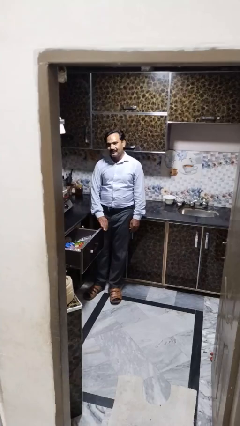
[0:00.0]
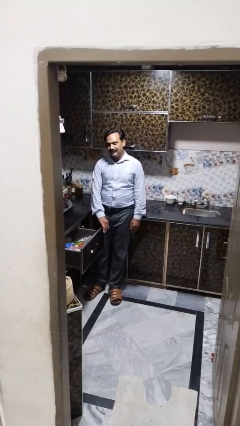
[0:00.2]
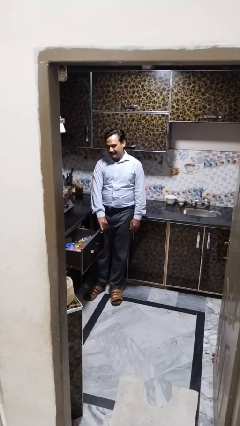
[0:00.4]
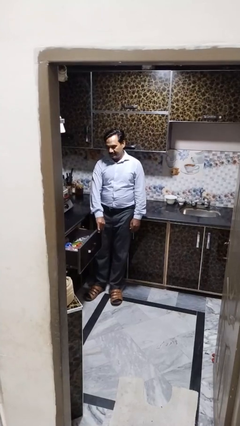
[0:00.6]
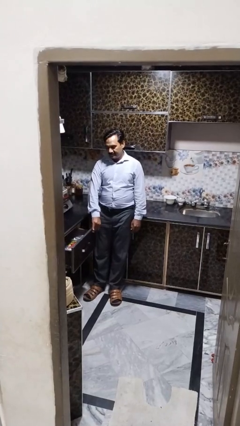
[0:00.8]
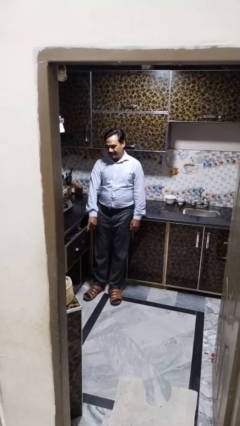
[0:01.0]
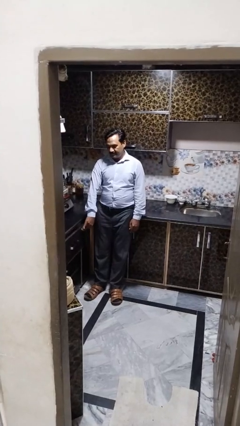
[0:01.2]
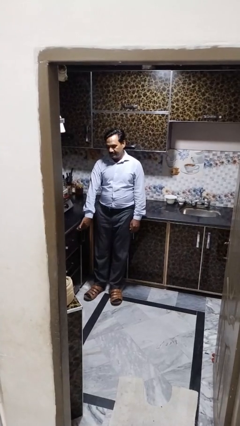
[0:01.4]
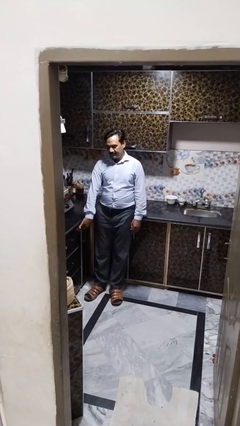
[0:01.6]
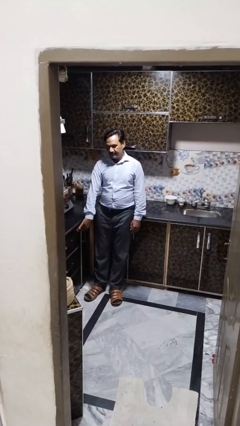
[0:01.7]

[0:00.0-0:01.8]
person closes kitchen drawer

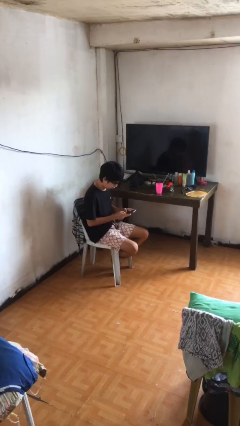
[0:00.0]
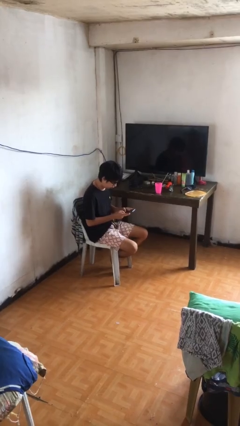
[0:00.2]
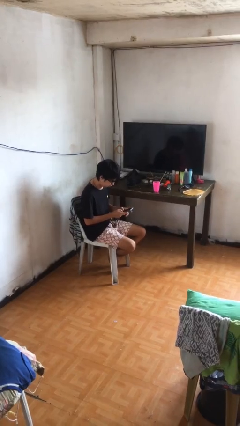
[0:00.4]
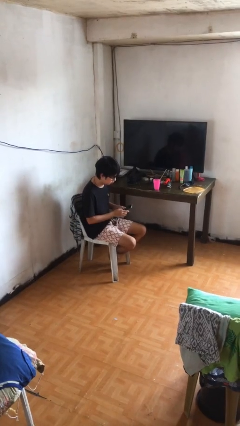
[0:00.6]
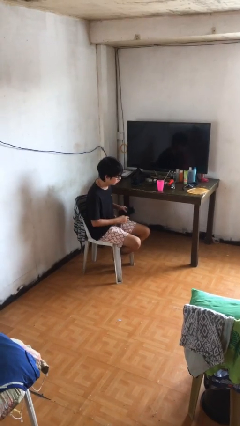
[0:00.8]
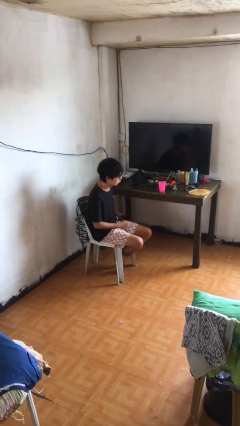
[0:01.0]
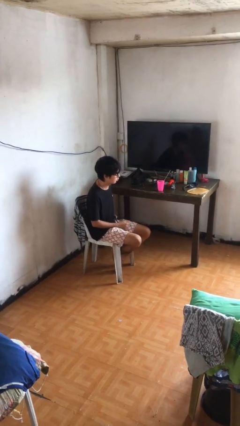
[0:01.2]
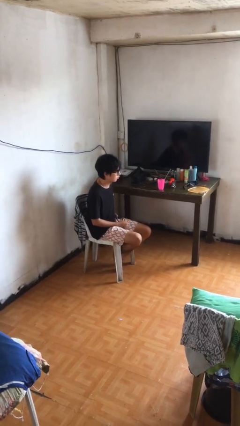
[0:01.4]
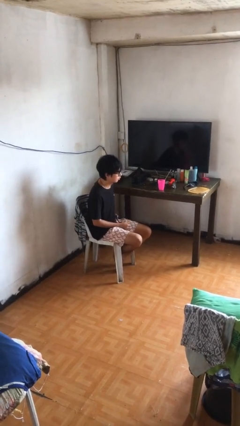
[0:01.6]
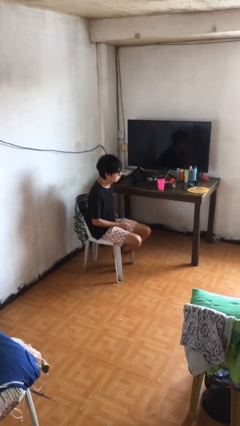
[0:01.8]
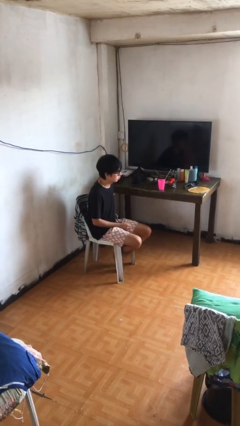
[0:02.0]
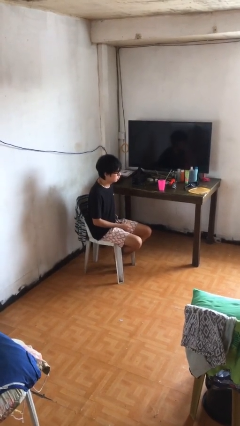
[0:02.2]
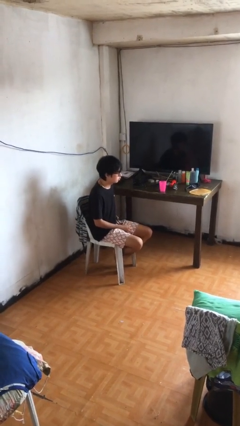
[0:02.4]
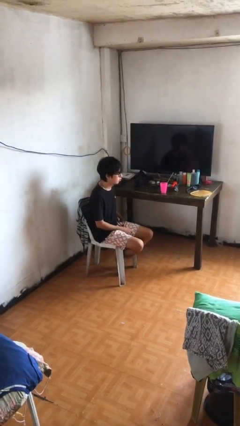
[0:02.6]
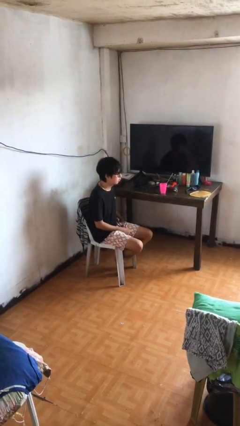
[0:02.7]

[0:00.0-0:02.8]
person puts phone into pocket

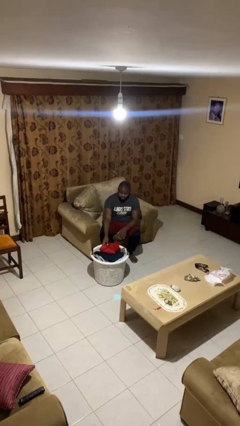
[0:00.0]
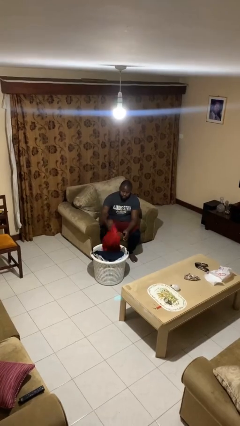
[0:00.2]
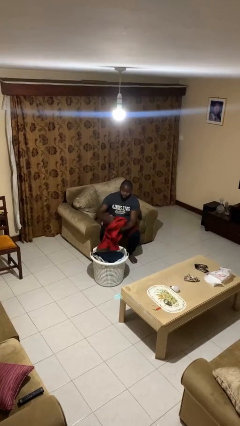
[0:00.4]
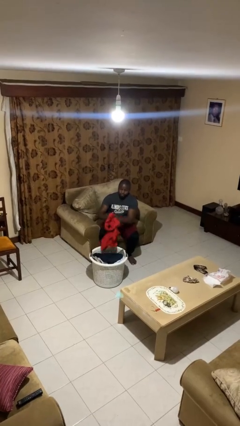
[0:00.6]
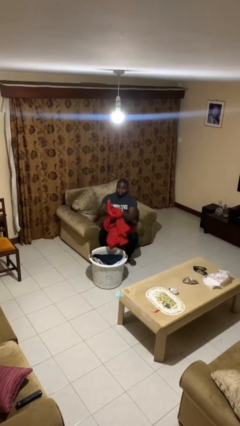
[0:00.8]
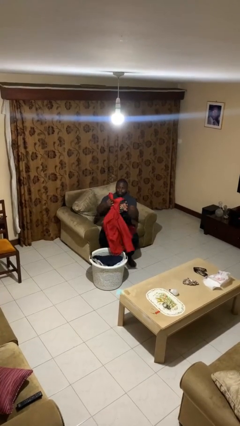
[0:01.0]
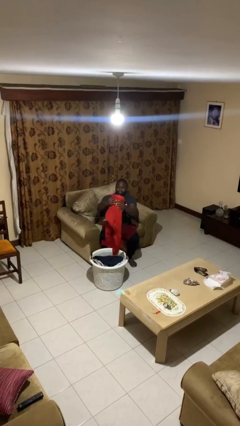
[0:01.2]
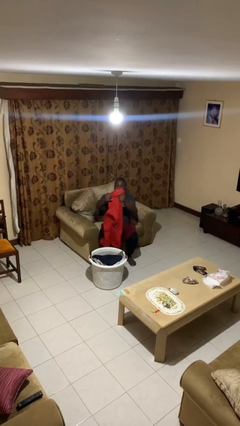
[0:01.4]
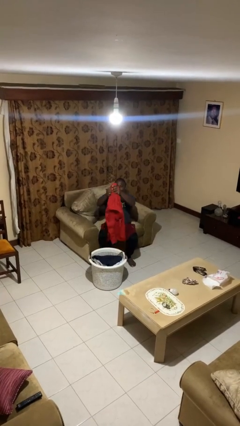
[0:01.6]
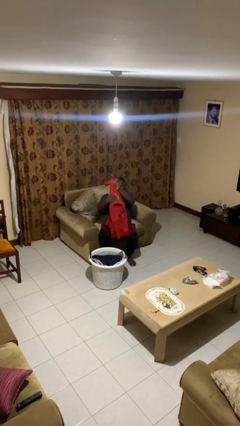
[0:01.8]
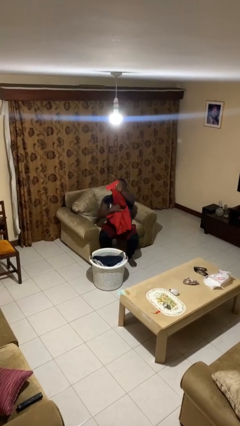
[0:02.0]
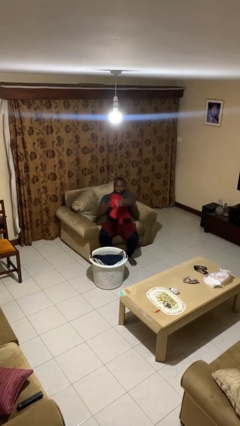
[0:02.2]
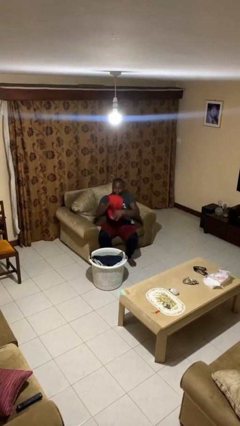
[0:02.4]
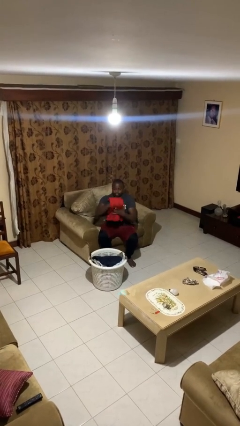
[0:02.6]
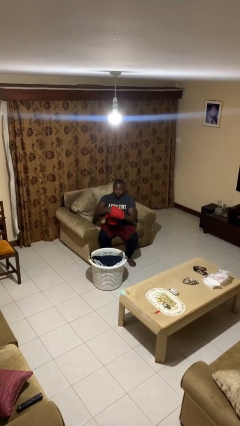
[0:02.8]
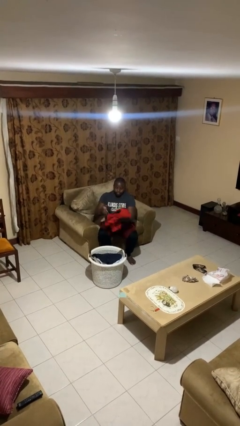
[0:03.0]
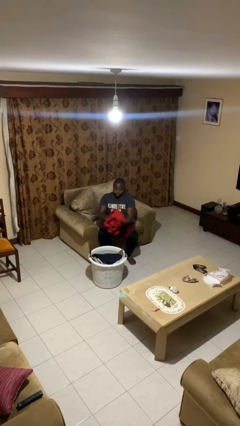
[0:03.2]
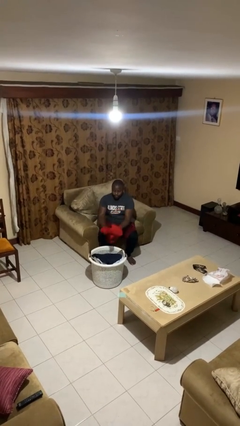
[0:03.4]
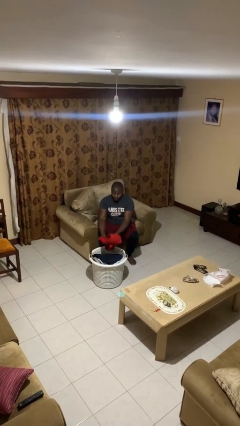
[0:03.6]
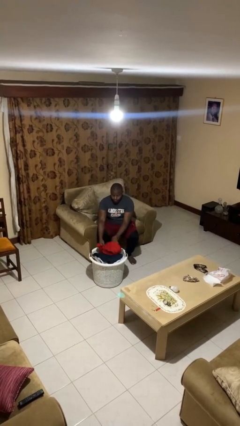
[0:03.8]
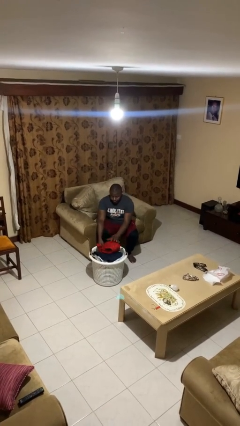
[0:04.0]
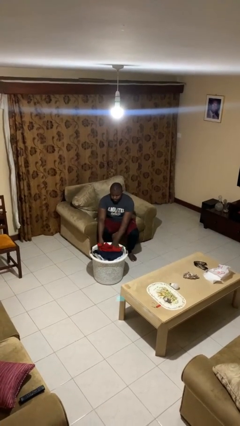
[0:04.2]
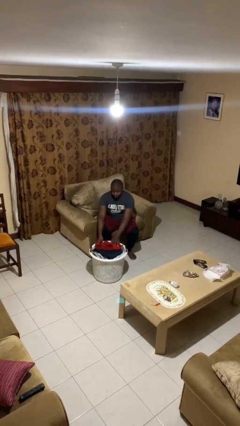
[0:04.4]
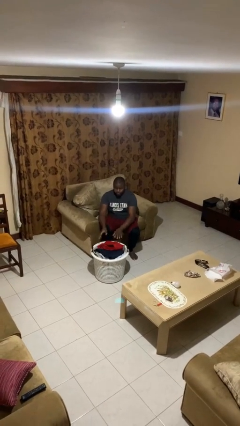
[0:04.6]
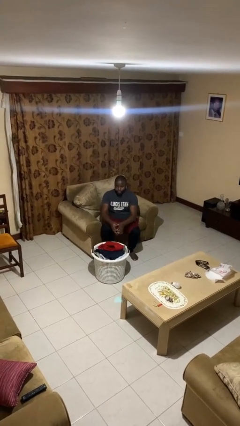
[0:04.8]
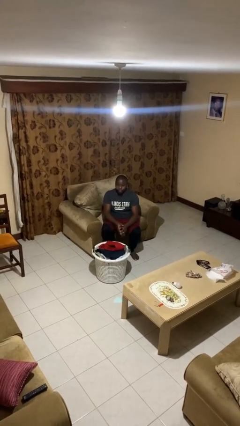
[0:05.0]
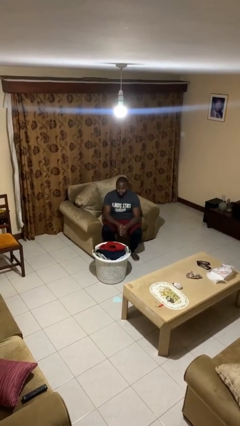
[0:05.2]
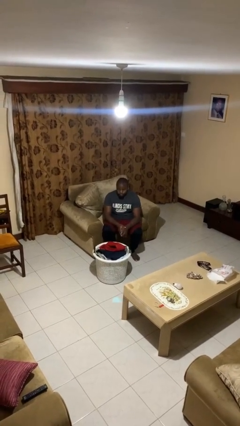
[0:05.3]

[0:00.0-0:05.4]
person folds shirt

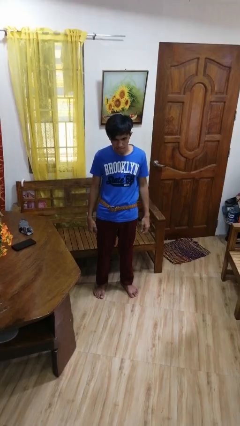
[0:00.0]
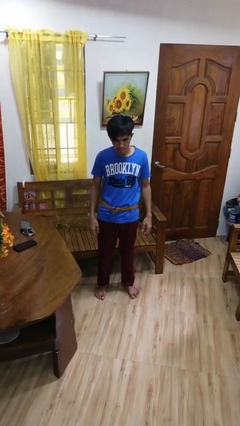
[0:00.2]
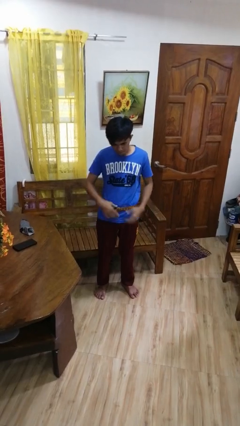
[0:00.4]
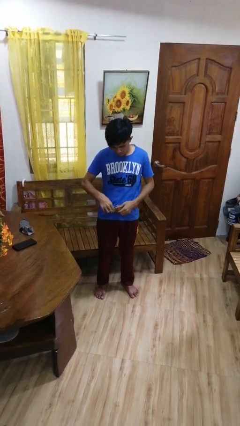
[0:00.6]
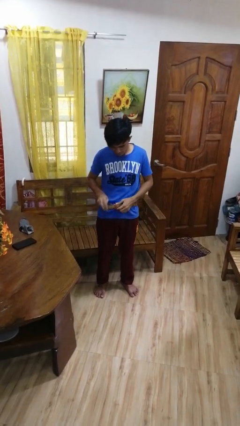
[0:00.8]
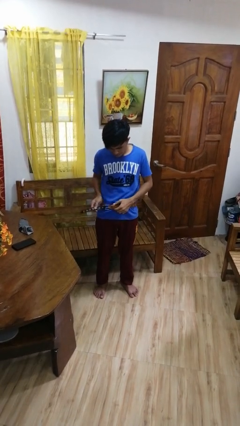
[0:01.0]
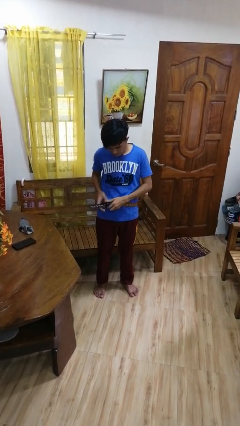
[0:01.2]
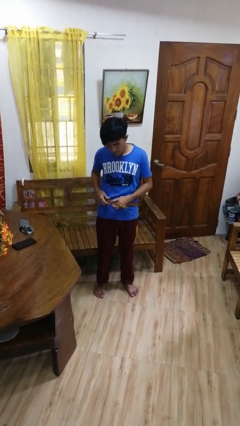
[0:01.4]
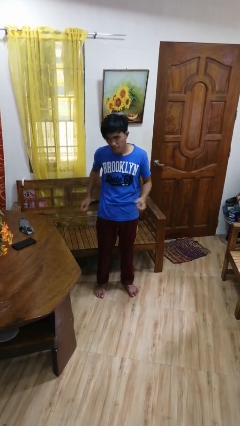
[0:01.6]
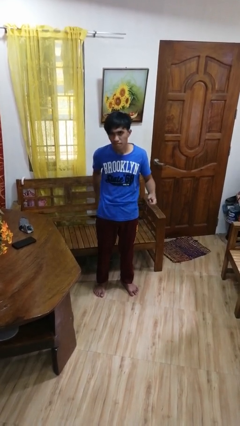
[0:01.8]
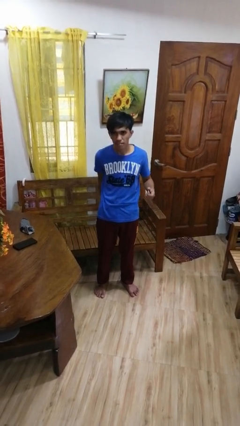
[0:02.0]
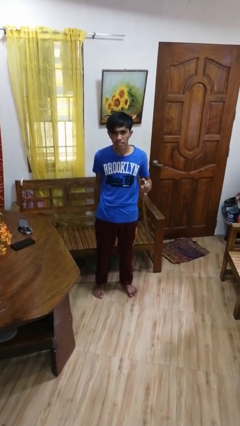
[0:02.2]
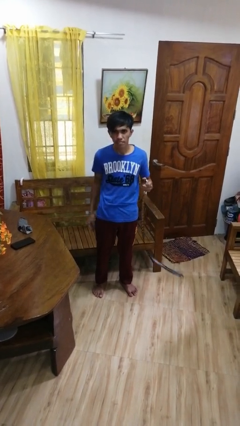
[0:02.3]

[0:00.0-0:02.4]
person takes off belt

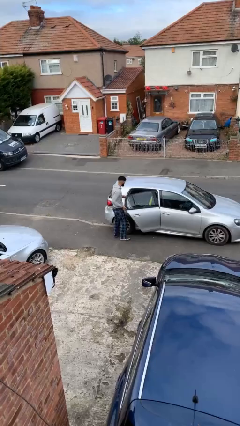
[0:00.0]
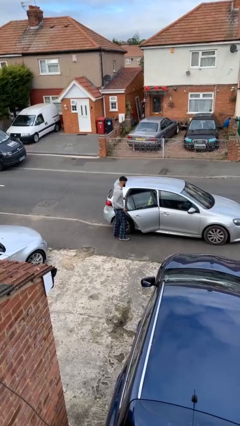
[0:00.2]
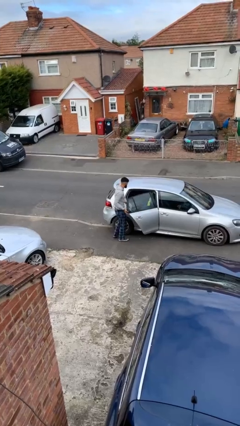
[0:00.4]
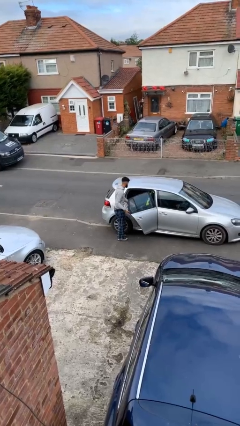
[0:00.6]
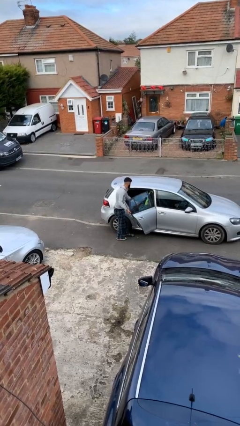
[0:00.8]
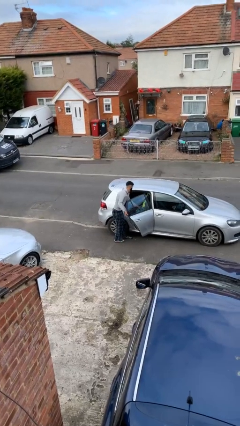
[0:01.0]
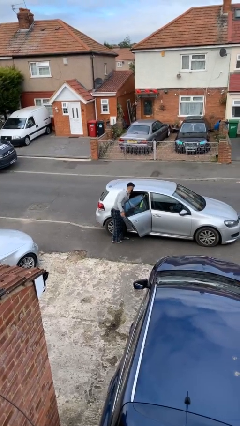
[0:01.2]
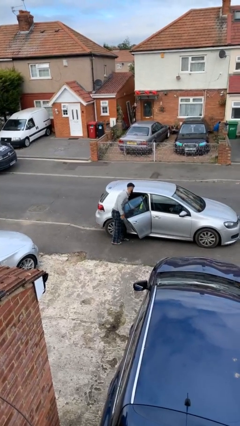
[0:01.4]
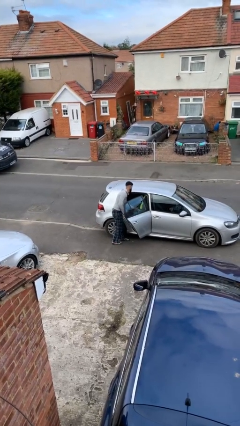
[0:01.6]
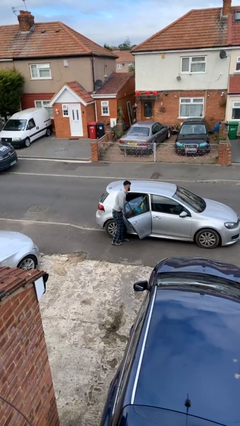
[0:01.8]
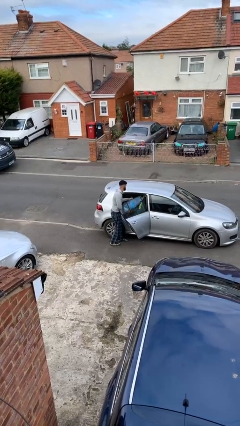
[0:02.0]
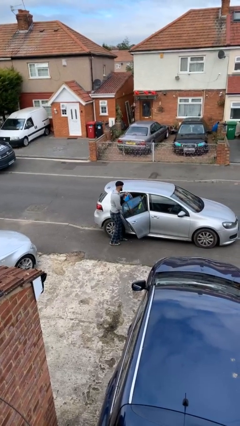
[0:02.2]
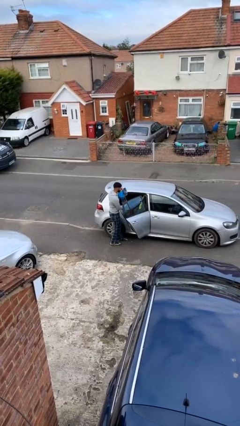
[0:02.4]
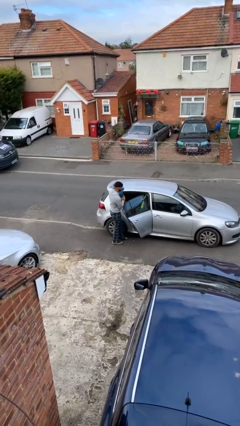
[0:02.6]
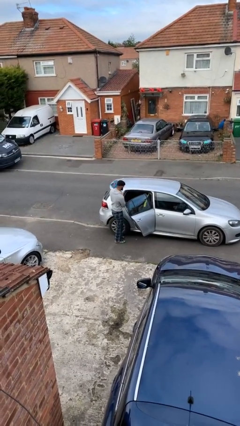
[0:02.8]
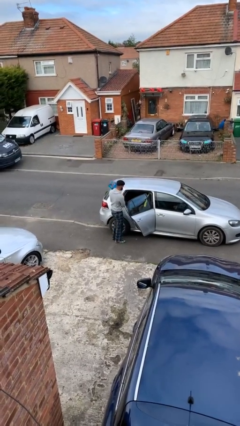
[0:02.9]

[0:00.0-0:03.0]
person unloads car

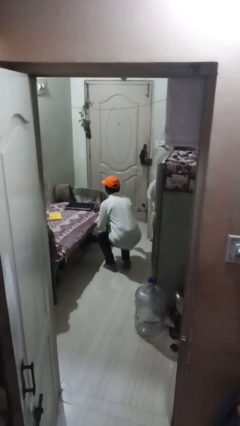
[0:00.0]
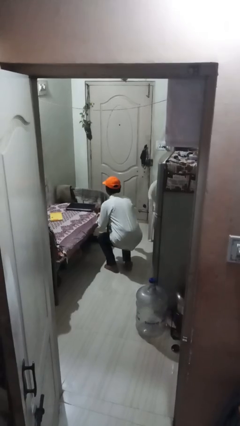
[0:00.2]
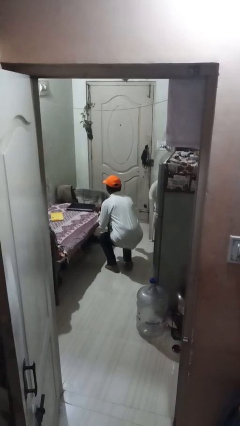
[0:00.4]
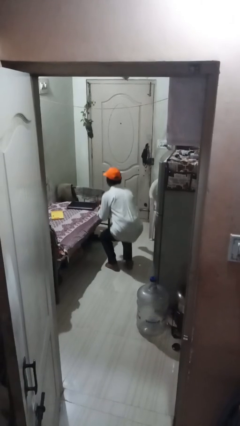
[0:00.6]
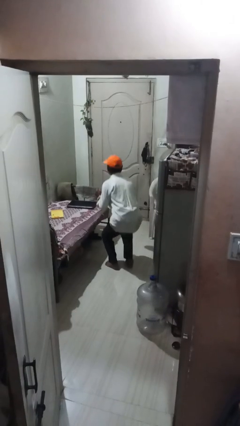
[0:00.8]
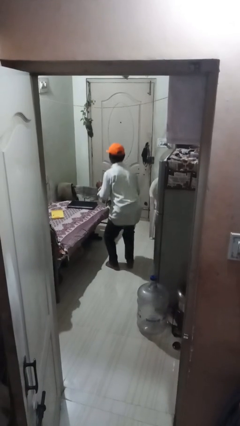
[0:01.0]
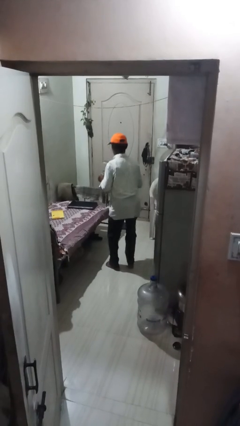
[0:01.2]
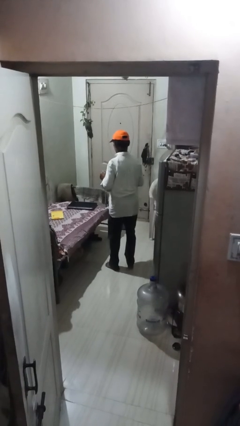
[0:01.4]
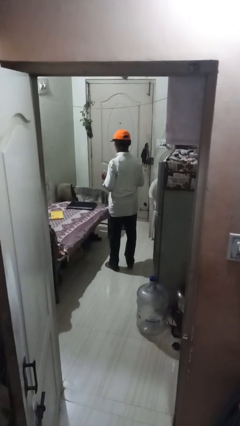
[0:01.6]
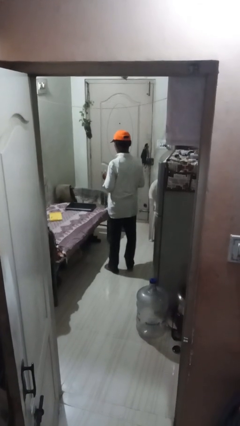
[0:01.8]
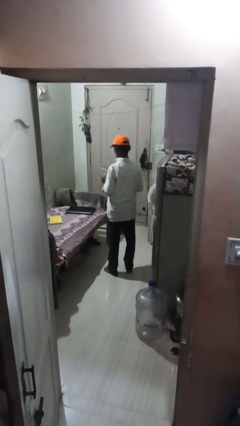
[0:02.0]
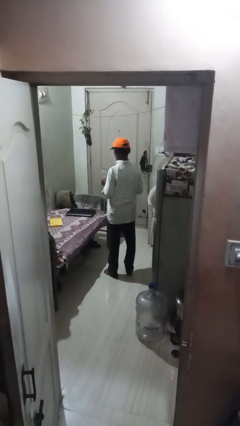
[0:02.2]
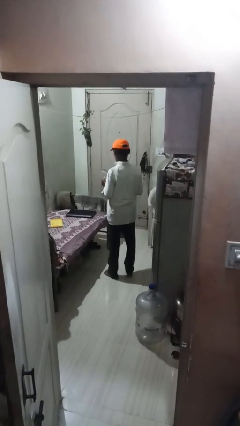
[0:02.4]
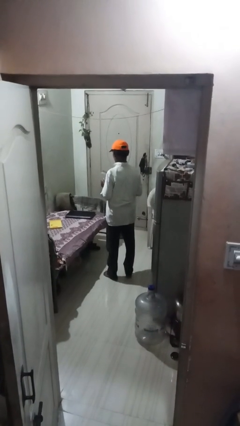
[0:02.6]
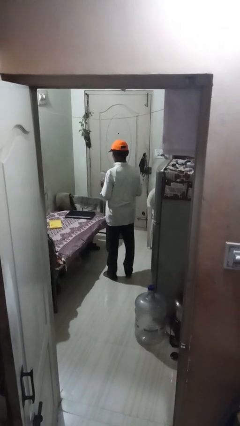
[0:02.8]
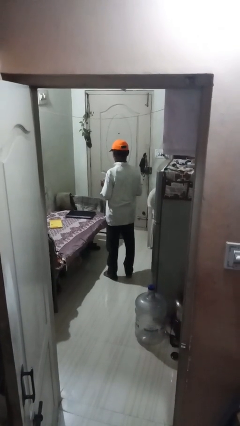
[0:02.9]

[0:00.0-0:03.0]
person stands up
